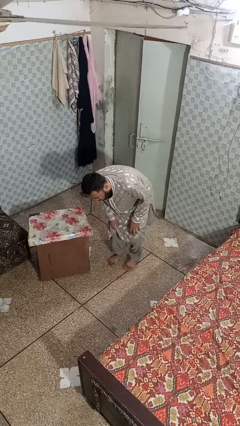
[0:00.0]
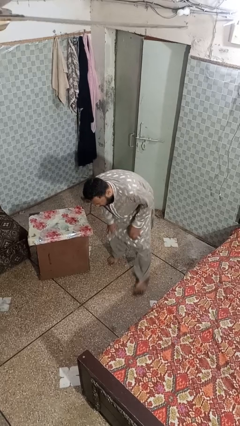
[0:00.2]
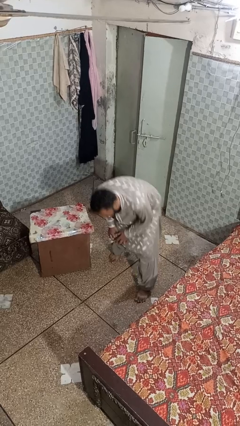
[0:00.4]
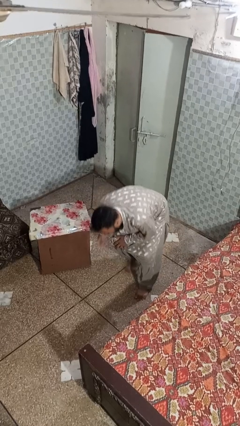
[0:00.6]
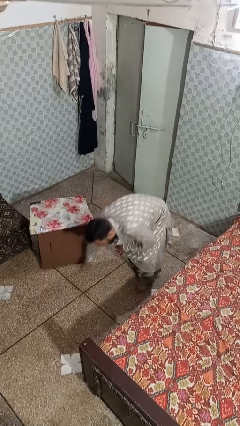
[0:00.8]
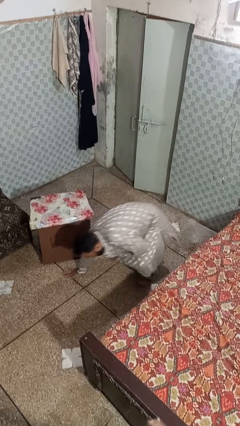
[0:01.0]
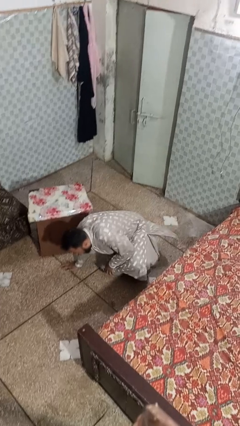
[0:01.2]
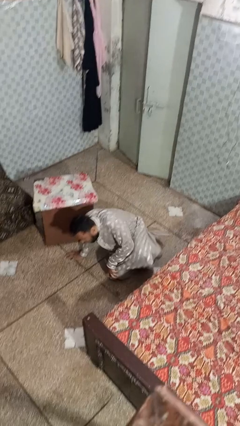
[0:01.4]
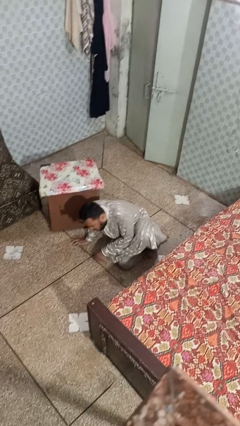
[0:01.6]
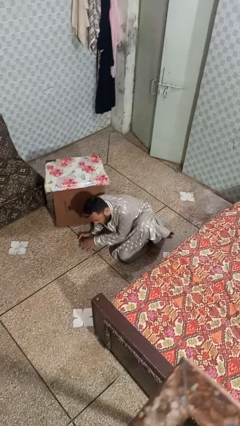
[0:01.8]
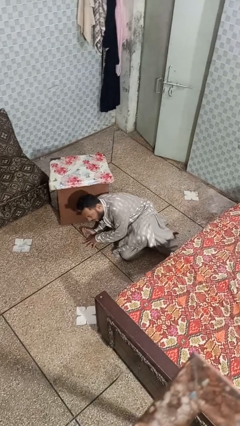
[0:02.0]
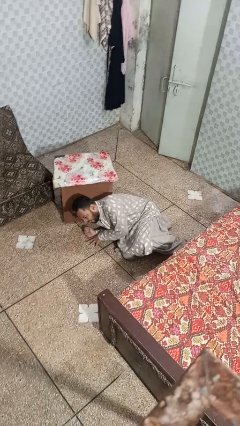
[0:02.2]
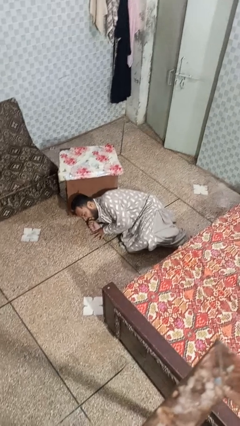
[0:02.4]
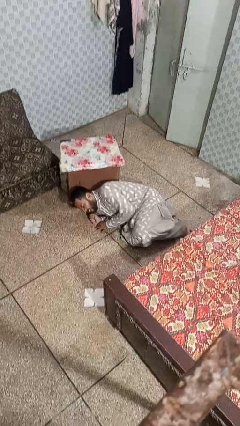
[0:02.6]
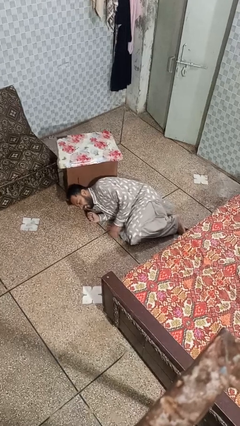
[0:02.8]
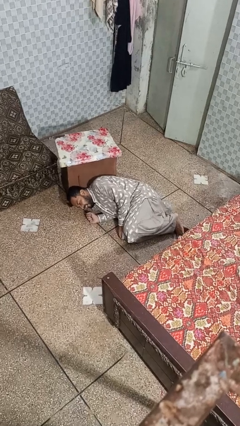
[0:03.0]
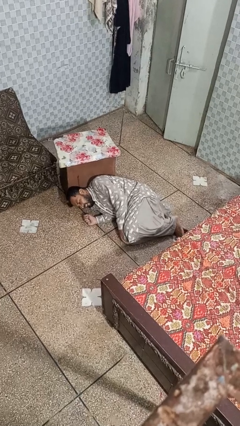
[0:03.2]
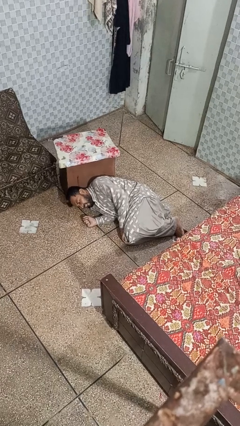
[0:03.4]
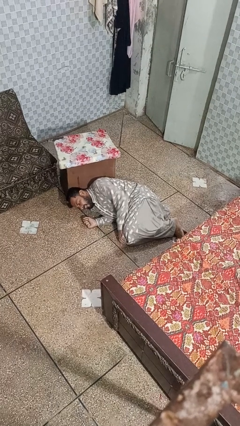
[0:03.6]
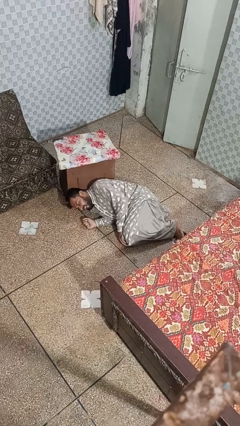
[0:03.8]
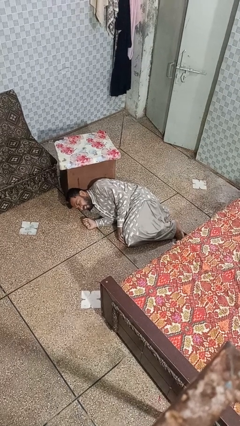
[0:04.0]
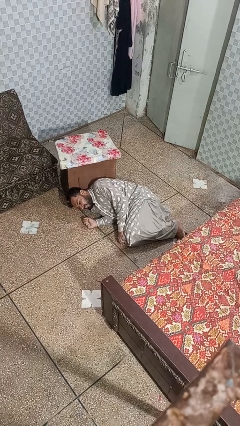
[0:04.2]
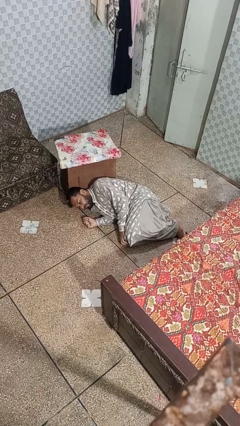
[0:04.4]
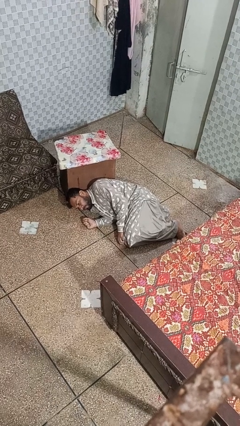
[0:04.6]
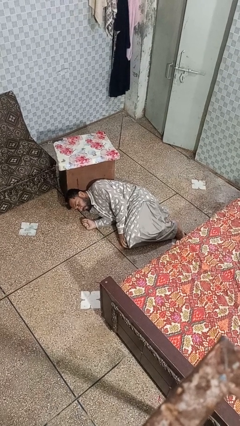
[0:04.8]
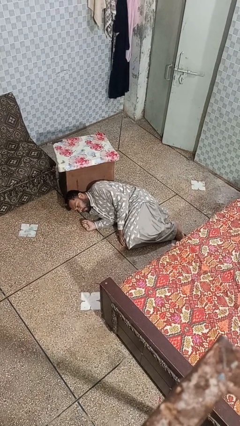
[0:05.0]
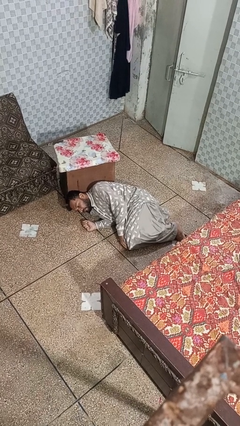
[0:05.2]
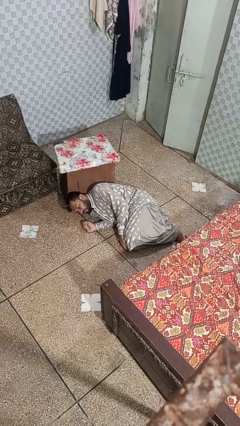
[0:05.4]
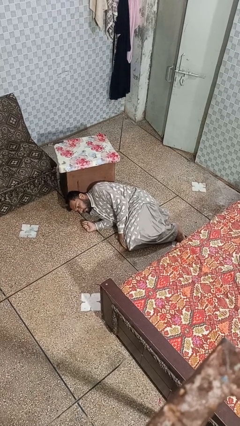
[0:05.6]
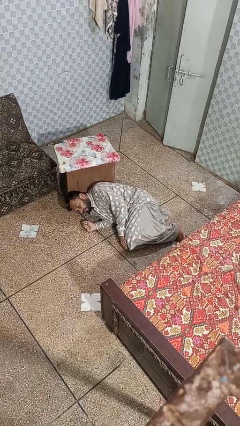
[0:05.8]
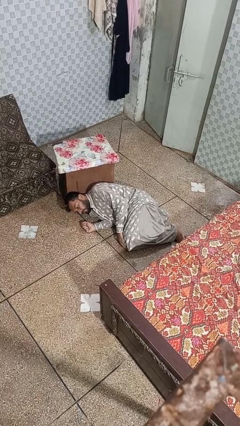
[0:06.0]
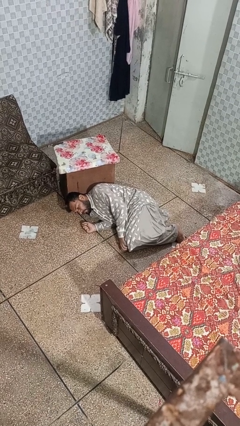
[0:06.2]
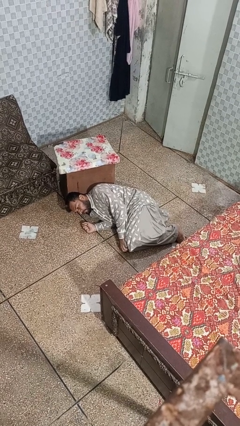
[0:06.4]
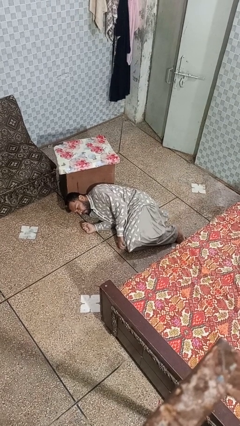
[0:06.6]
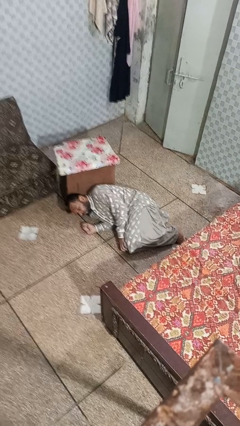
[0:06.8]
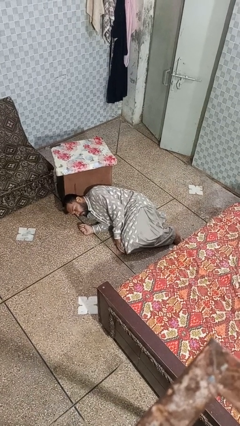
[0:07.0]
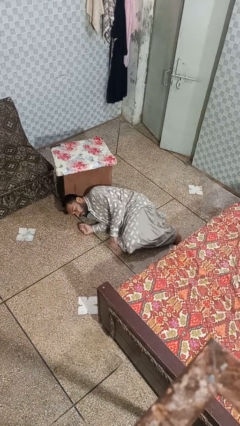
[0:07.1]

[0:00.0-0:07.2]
person lies down on floor

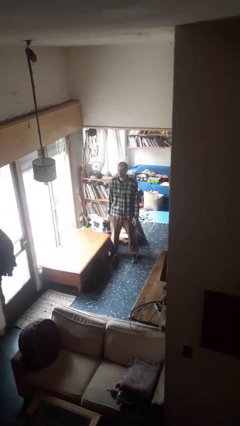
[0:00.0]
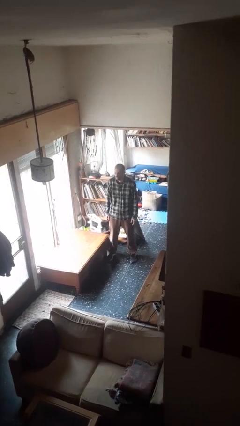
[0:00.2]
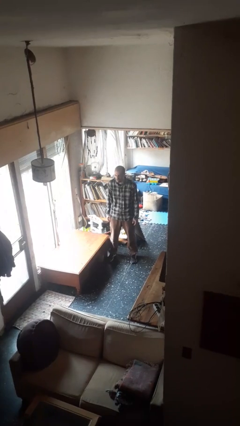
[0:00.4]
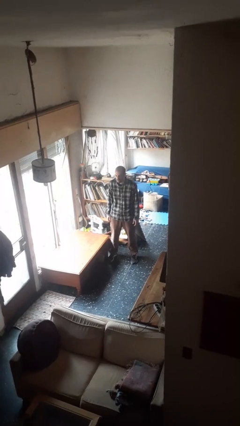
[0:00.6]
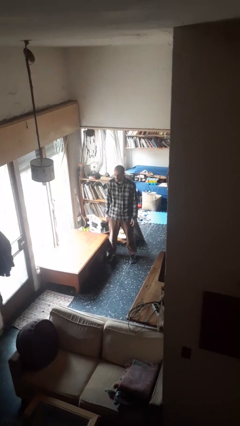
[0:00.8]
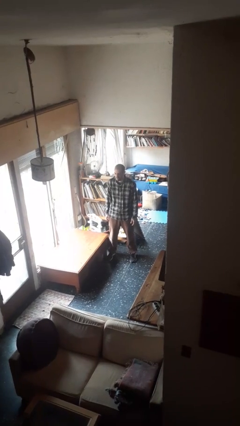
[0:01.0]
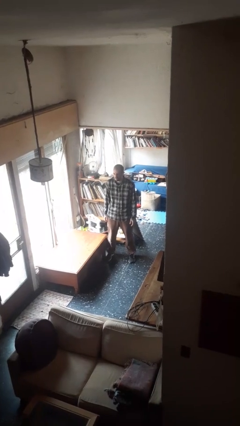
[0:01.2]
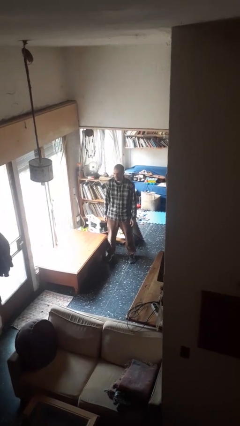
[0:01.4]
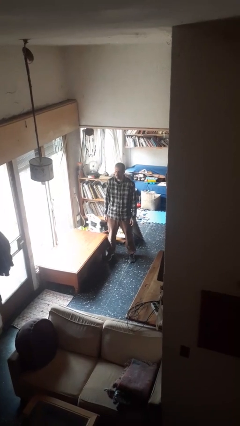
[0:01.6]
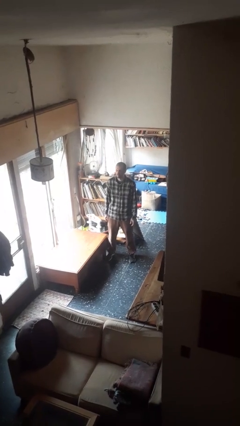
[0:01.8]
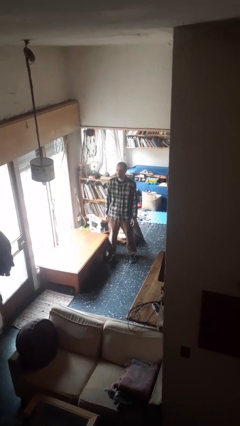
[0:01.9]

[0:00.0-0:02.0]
person sticks out tongue

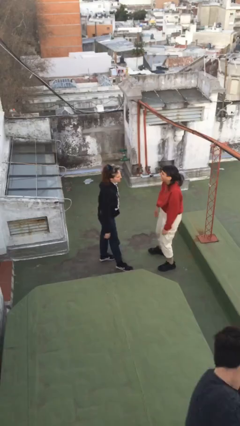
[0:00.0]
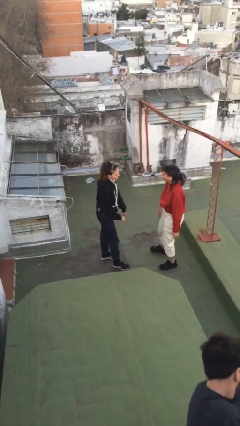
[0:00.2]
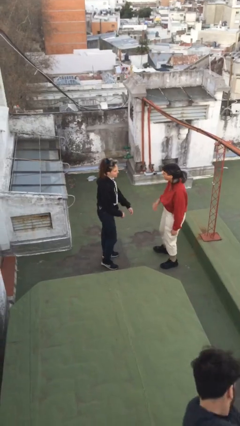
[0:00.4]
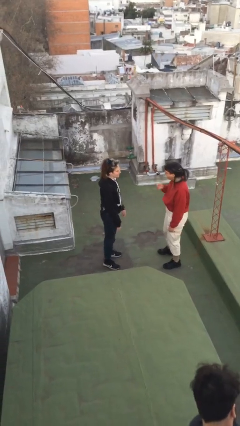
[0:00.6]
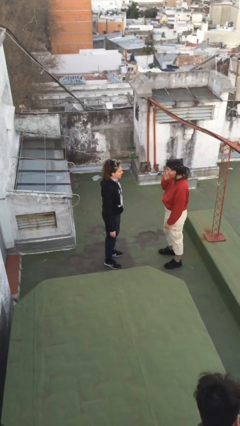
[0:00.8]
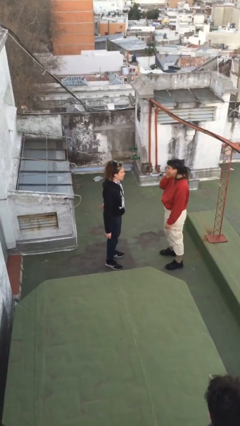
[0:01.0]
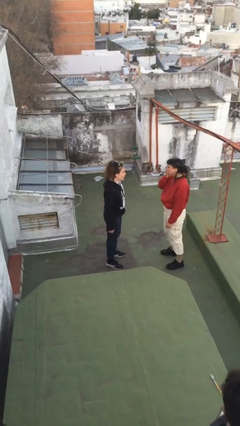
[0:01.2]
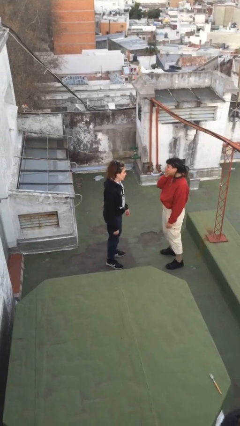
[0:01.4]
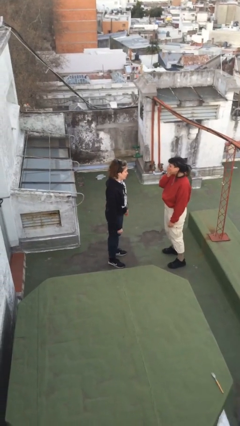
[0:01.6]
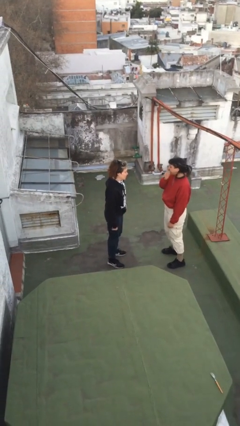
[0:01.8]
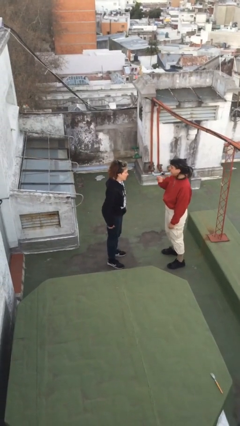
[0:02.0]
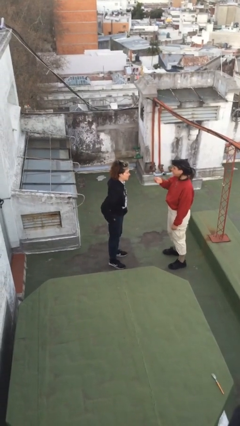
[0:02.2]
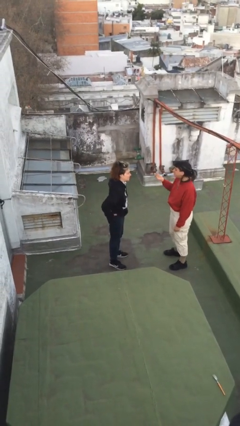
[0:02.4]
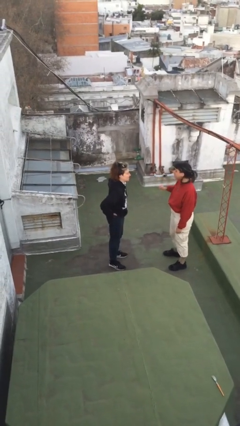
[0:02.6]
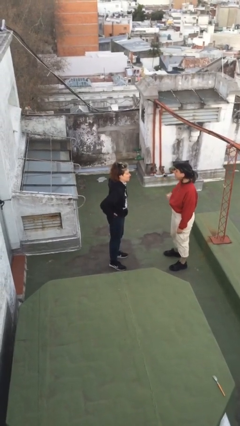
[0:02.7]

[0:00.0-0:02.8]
person talks to person

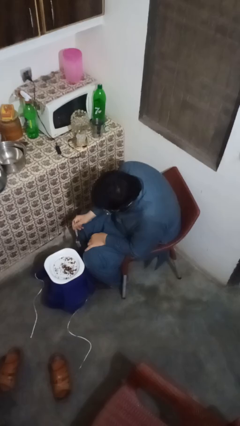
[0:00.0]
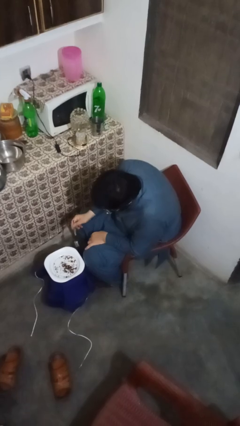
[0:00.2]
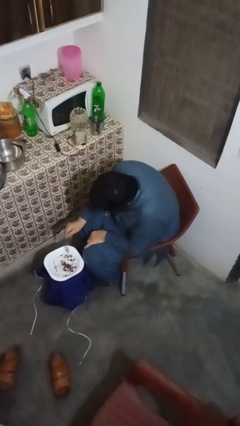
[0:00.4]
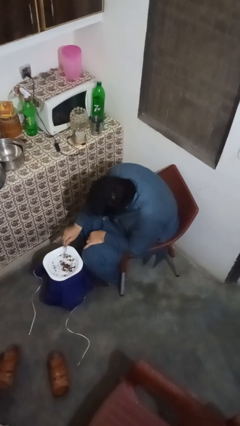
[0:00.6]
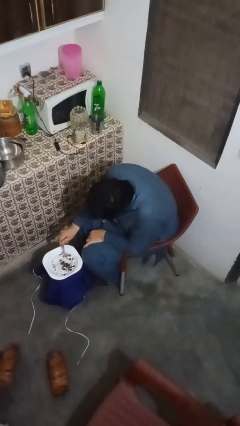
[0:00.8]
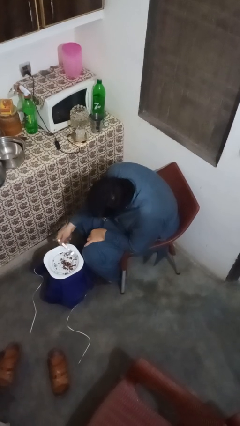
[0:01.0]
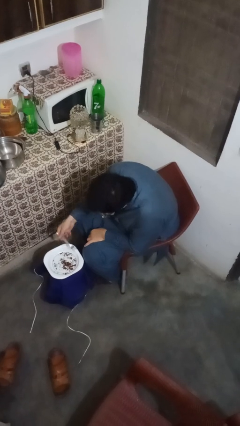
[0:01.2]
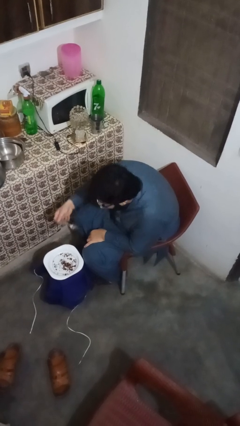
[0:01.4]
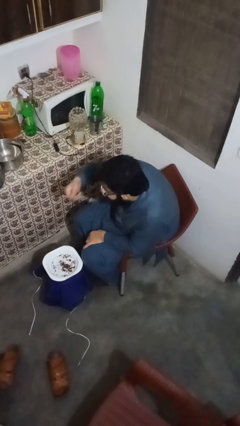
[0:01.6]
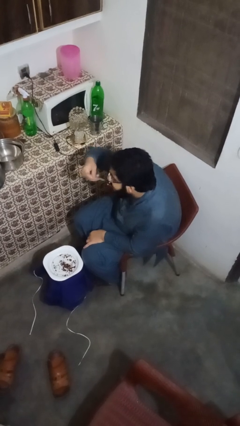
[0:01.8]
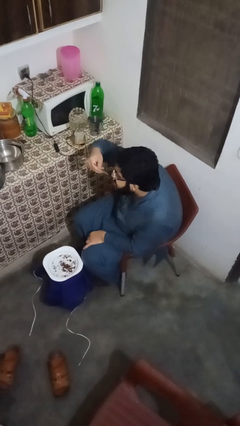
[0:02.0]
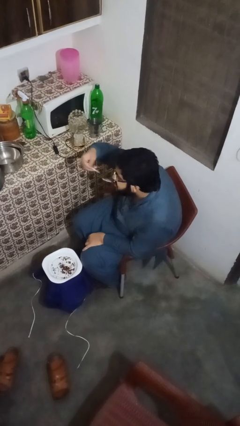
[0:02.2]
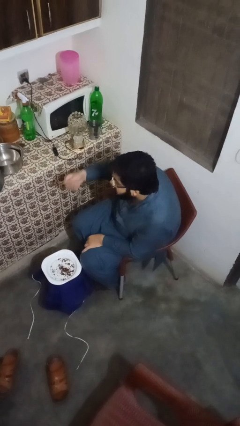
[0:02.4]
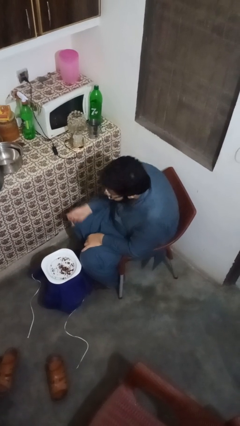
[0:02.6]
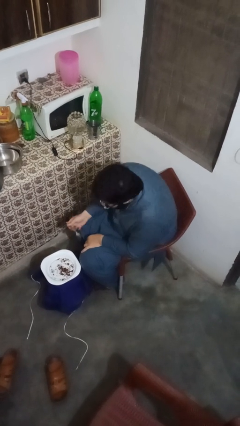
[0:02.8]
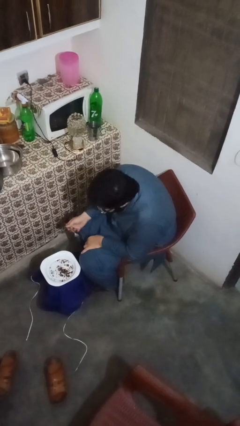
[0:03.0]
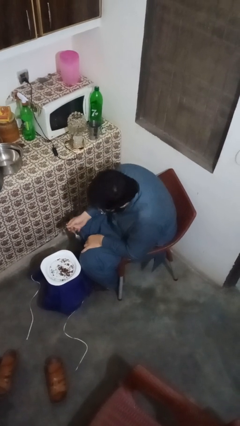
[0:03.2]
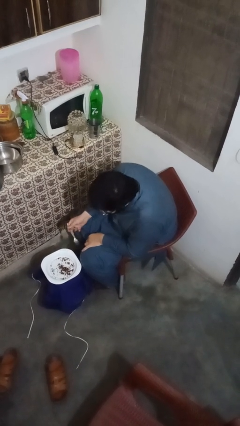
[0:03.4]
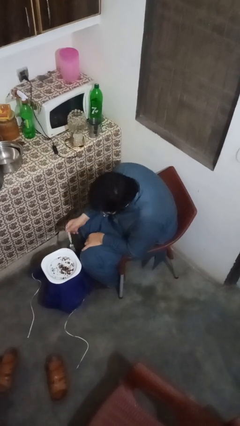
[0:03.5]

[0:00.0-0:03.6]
person eats with utensil

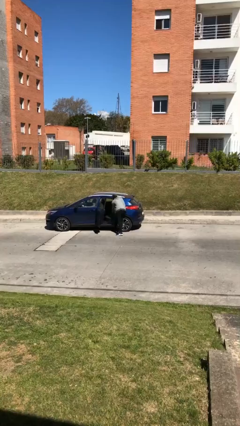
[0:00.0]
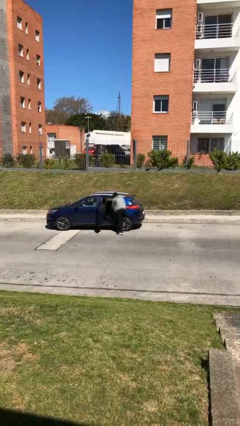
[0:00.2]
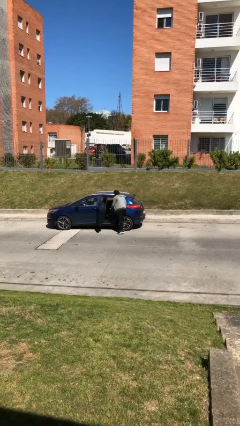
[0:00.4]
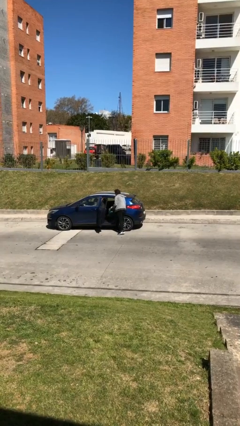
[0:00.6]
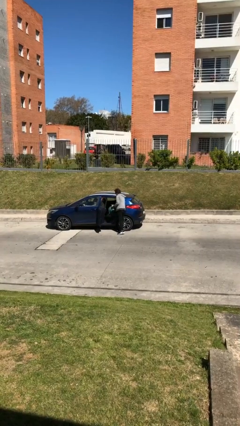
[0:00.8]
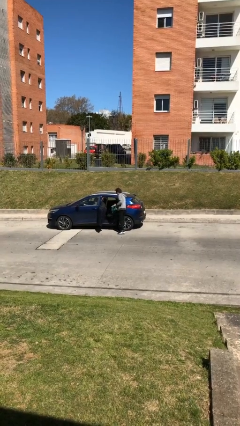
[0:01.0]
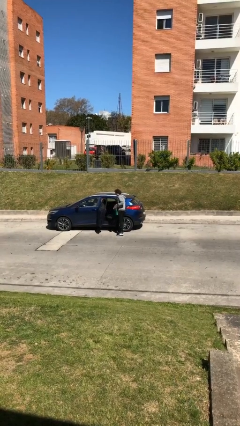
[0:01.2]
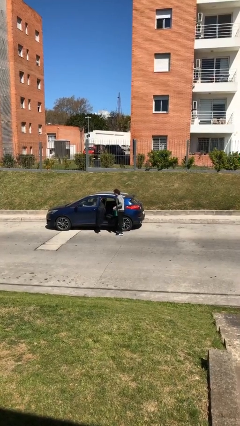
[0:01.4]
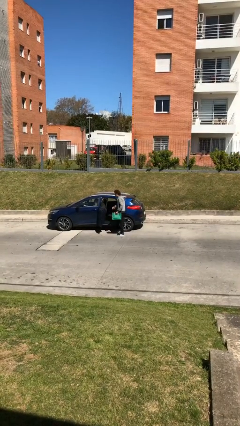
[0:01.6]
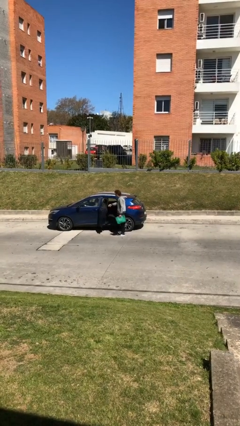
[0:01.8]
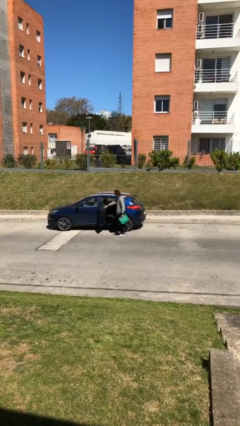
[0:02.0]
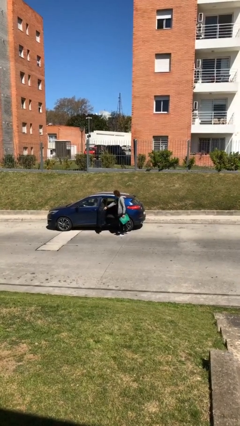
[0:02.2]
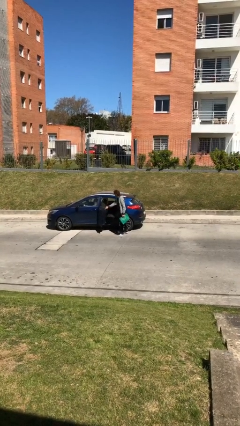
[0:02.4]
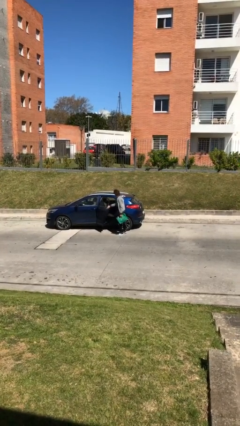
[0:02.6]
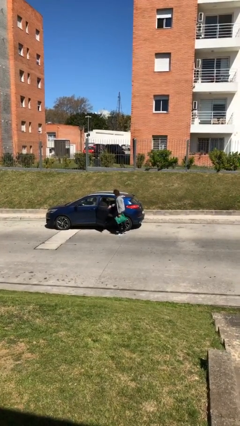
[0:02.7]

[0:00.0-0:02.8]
person unloads car
